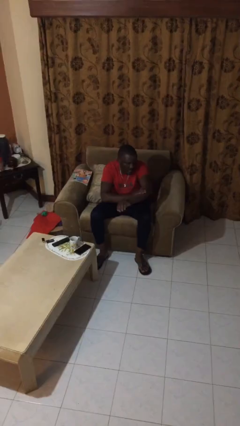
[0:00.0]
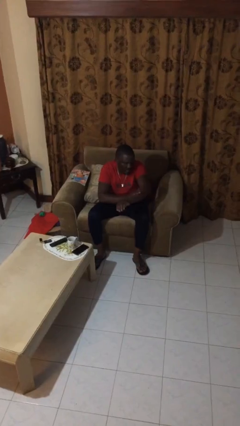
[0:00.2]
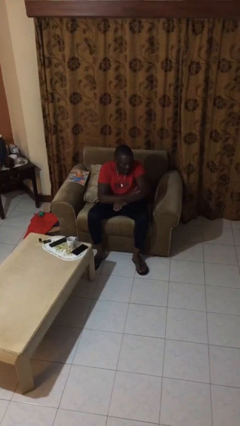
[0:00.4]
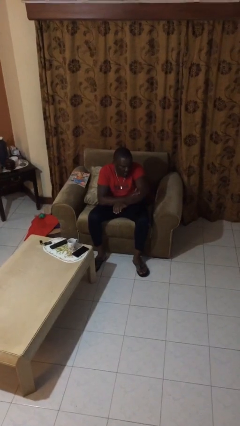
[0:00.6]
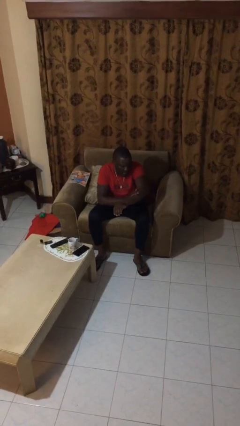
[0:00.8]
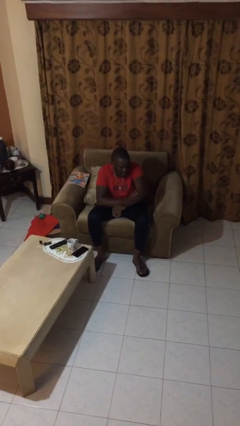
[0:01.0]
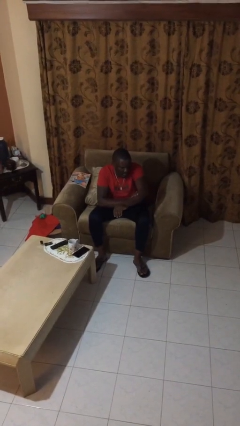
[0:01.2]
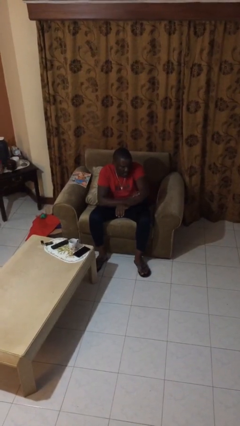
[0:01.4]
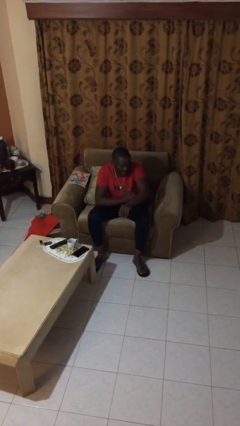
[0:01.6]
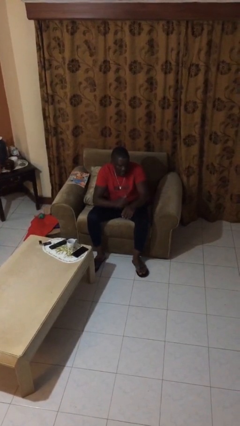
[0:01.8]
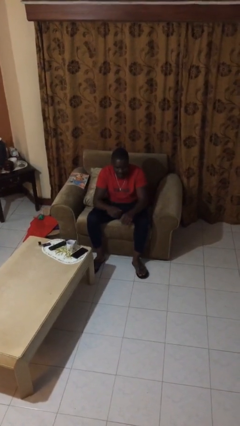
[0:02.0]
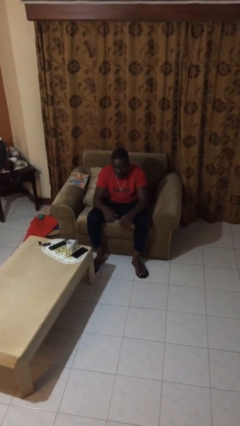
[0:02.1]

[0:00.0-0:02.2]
person swats bug

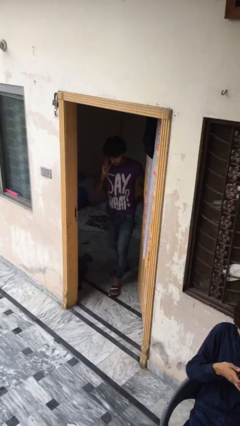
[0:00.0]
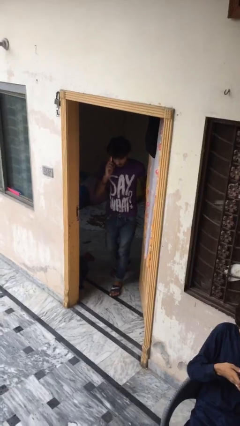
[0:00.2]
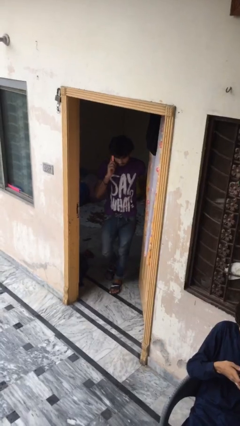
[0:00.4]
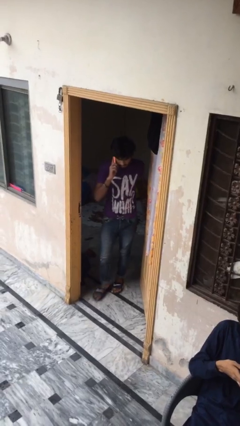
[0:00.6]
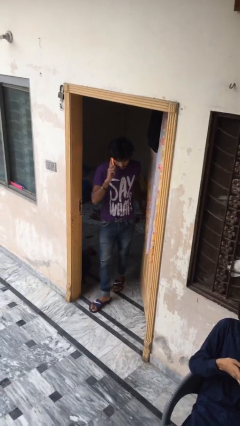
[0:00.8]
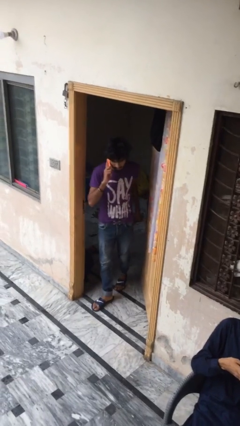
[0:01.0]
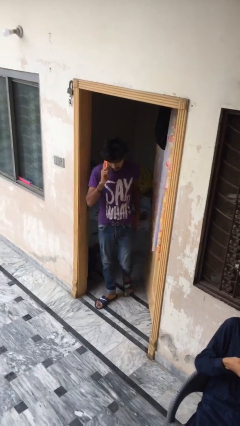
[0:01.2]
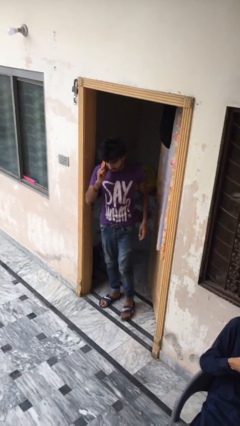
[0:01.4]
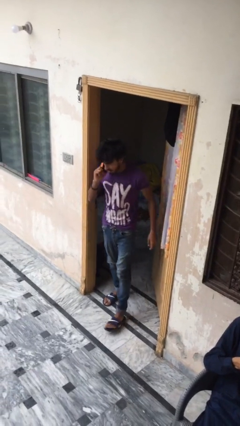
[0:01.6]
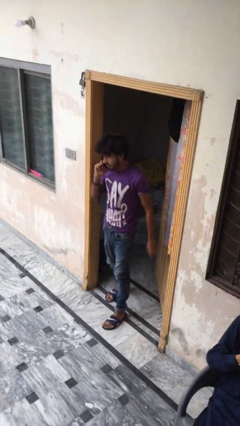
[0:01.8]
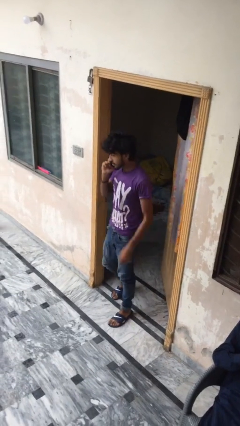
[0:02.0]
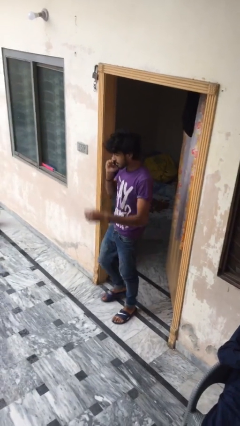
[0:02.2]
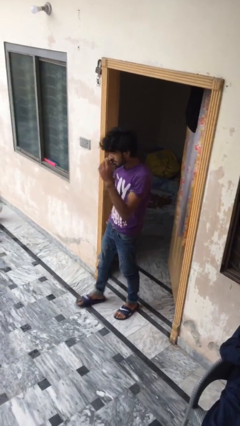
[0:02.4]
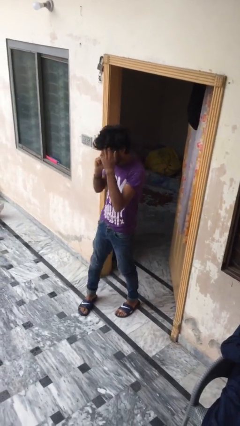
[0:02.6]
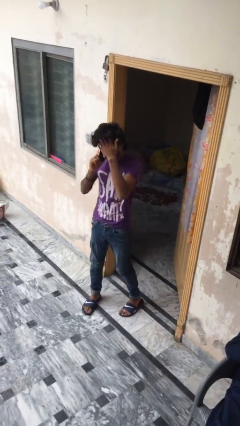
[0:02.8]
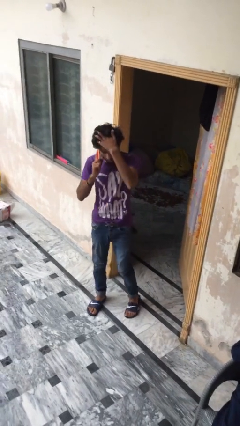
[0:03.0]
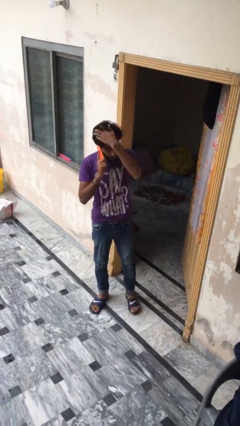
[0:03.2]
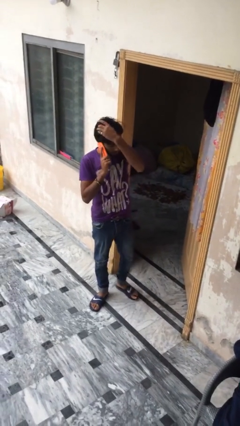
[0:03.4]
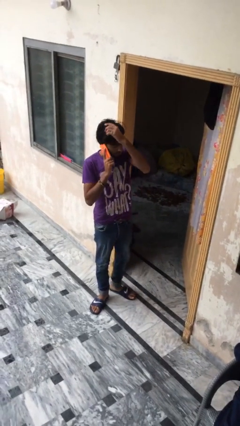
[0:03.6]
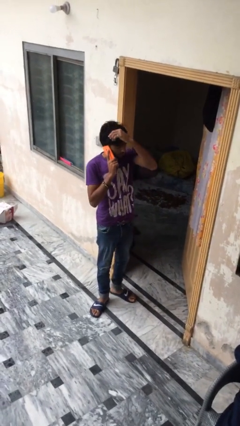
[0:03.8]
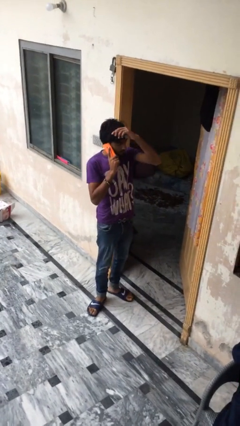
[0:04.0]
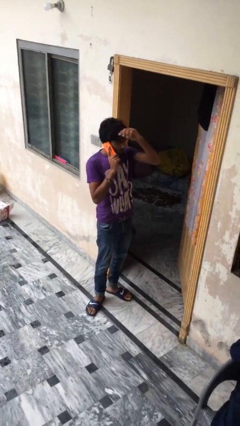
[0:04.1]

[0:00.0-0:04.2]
person enters scene through structure

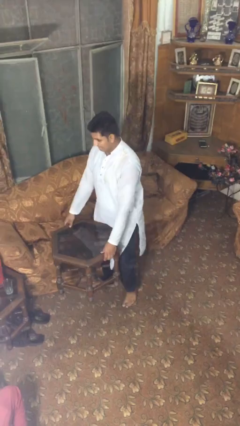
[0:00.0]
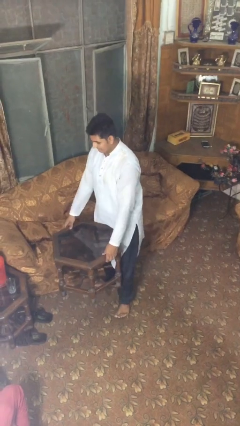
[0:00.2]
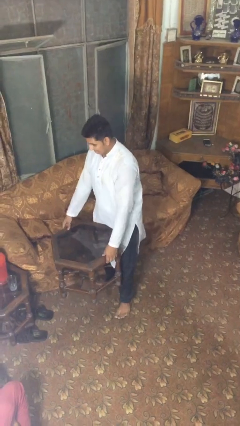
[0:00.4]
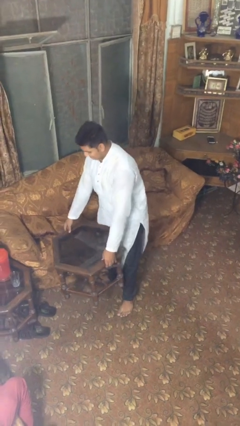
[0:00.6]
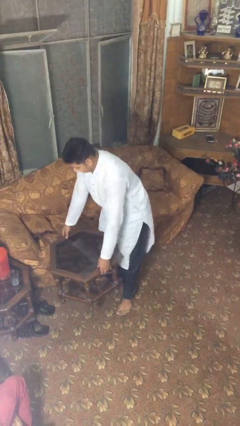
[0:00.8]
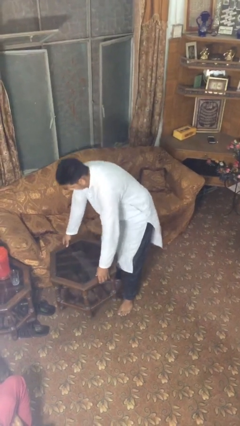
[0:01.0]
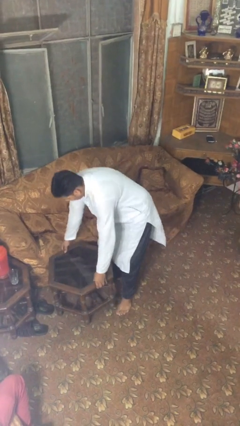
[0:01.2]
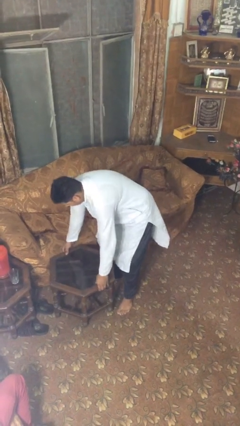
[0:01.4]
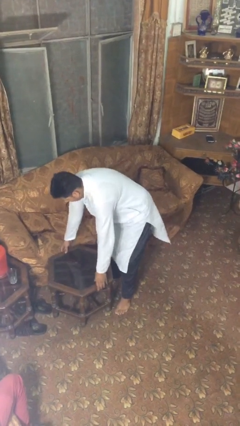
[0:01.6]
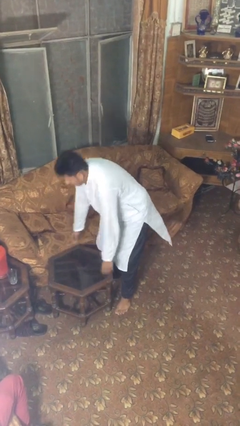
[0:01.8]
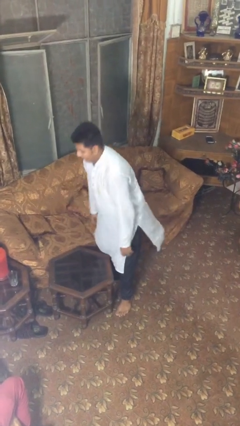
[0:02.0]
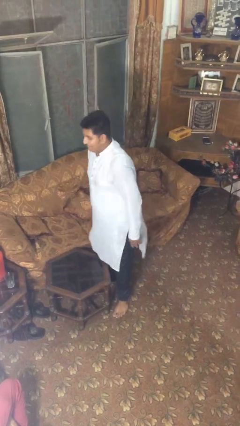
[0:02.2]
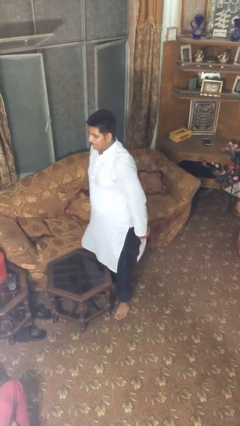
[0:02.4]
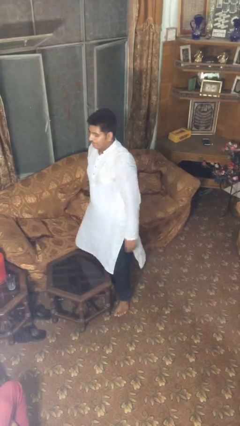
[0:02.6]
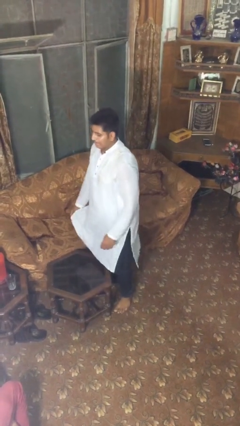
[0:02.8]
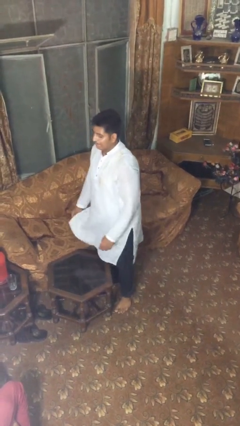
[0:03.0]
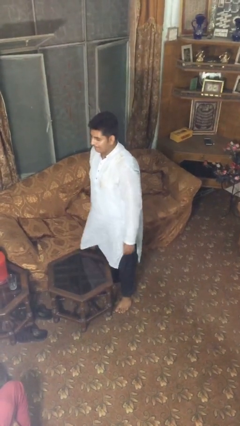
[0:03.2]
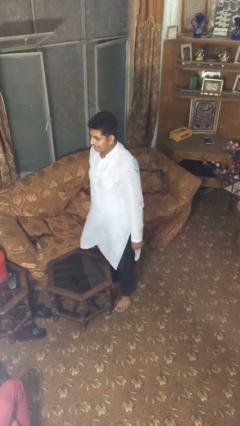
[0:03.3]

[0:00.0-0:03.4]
person puts down object on floor

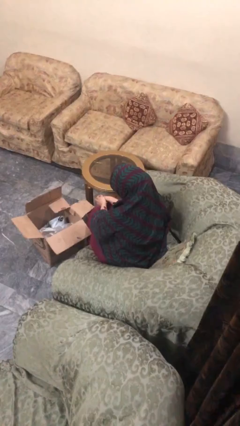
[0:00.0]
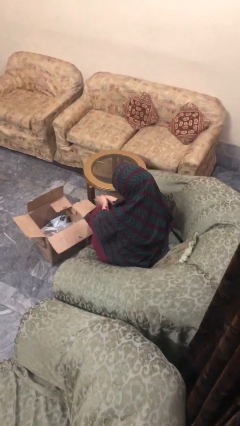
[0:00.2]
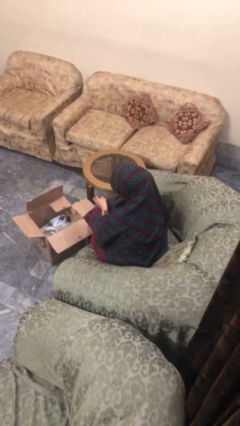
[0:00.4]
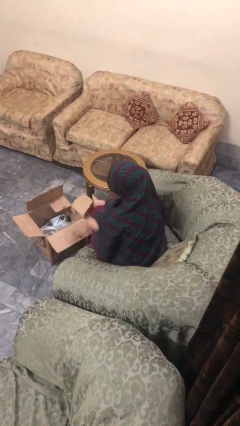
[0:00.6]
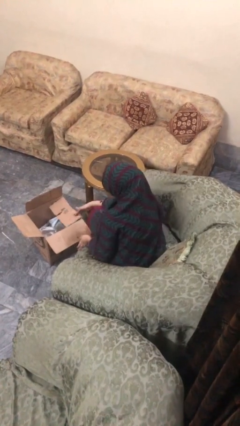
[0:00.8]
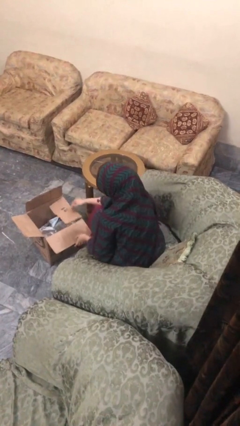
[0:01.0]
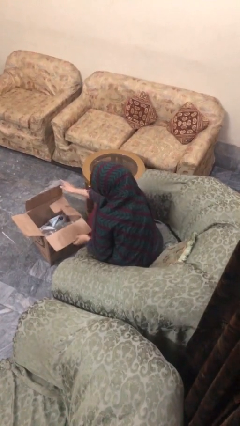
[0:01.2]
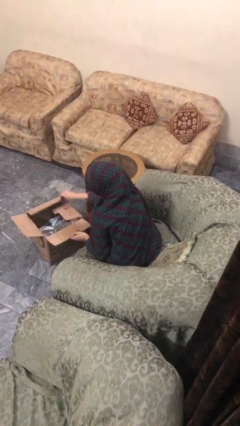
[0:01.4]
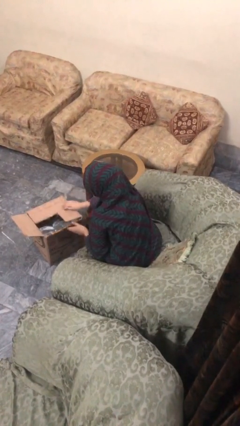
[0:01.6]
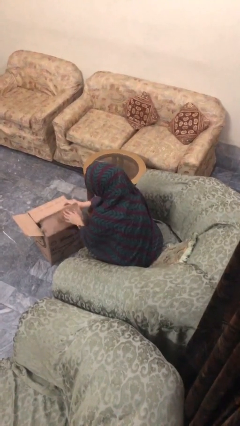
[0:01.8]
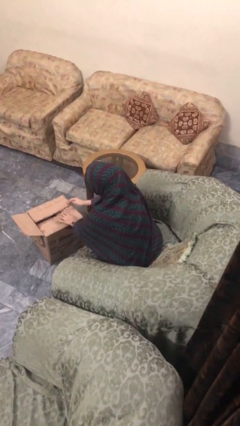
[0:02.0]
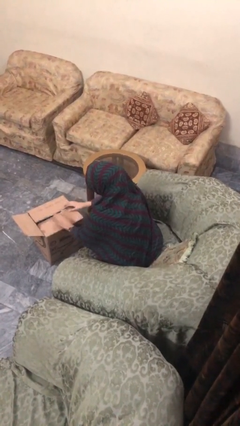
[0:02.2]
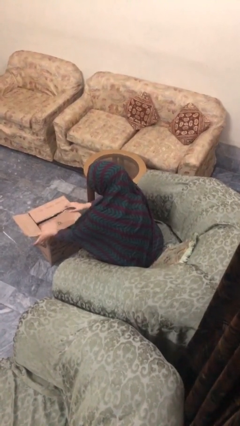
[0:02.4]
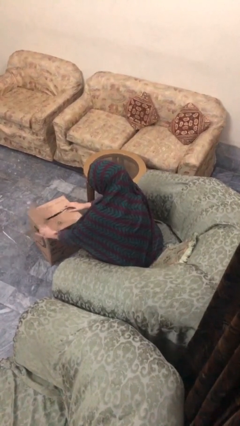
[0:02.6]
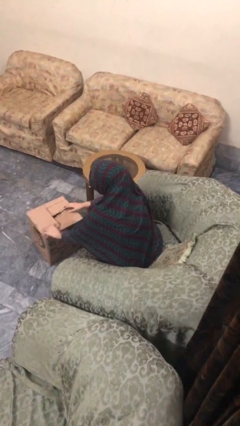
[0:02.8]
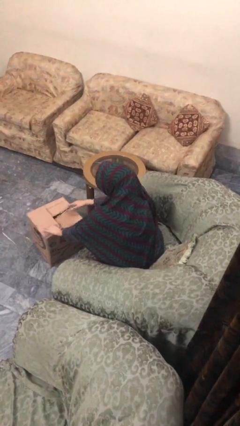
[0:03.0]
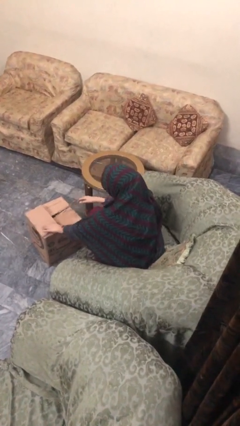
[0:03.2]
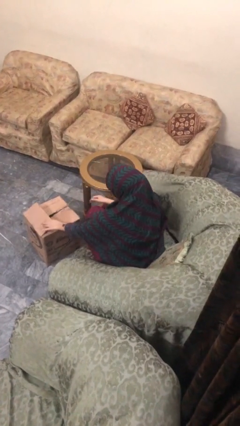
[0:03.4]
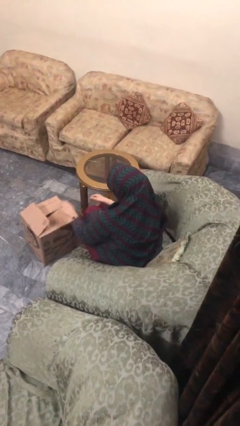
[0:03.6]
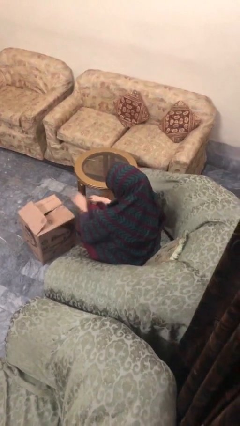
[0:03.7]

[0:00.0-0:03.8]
person closes box

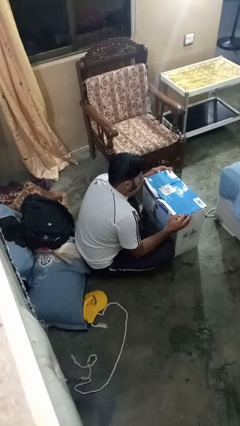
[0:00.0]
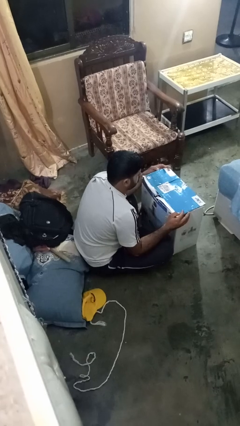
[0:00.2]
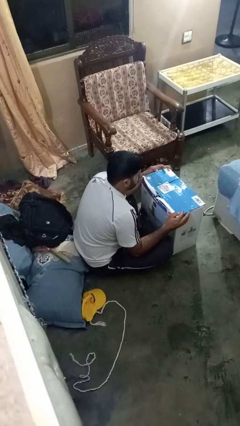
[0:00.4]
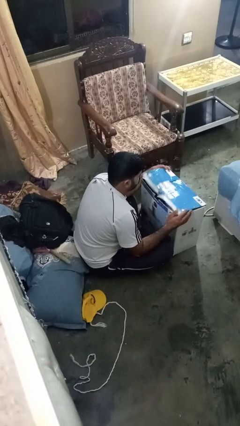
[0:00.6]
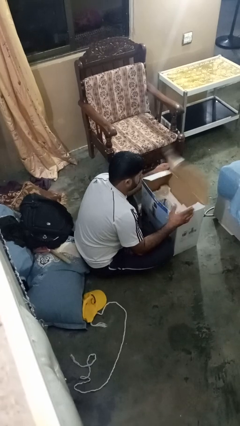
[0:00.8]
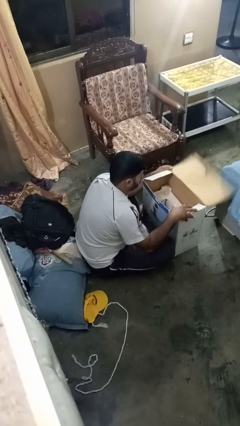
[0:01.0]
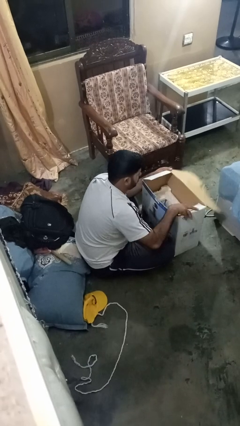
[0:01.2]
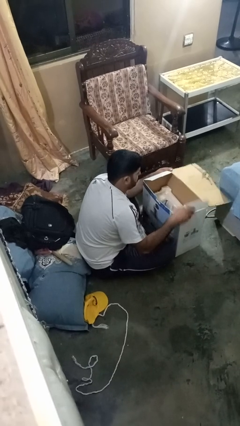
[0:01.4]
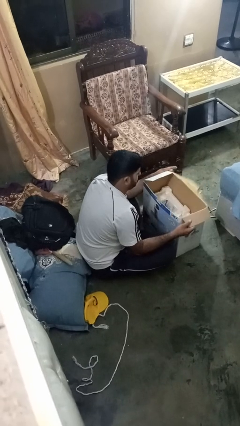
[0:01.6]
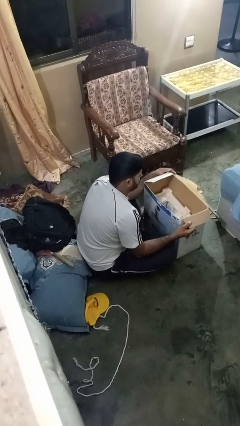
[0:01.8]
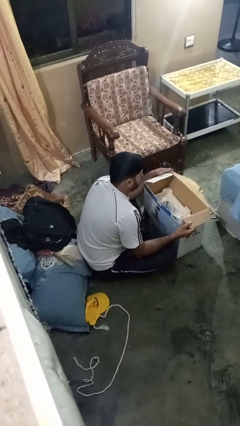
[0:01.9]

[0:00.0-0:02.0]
person opens box

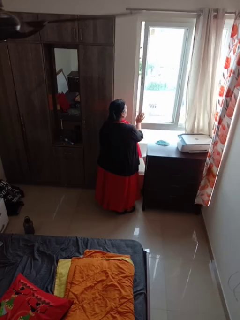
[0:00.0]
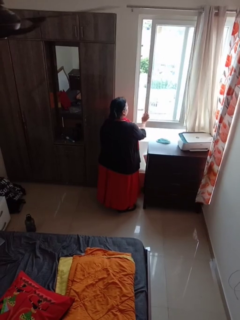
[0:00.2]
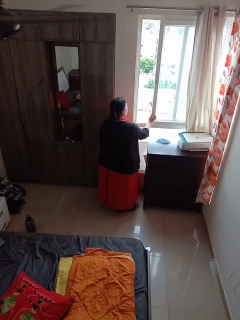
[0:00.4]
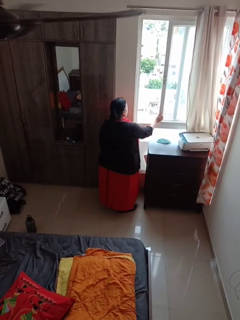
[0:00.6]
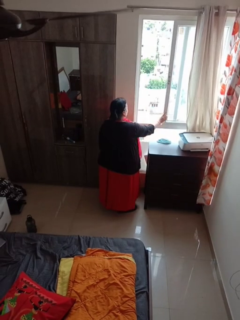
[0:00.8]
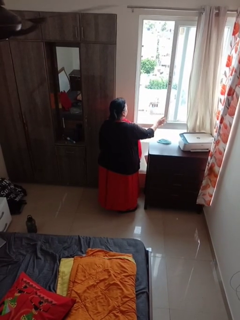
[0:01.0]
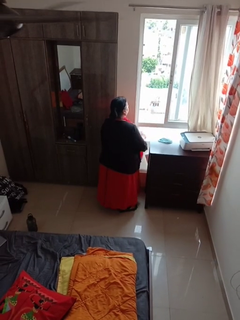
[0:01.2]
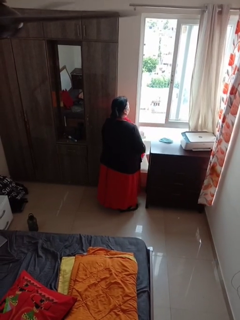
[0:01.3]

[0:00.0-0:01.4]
person opens home window

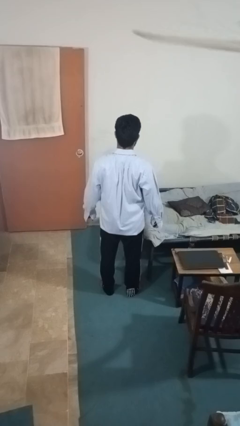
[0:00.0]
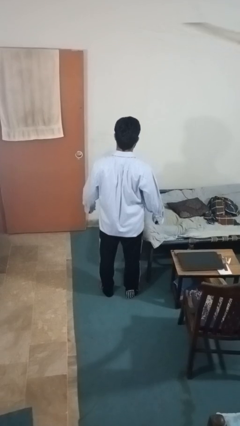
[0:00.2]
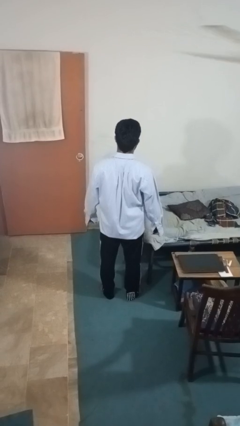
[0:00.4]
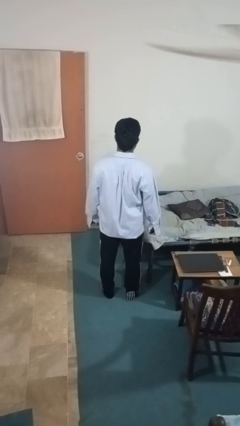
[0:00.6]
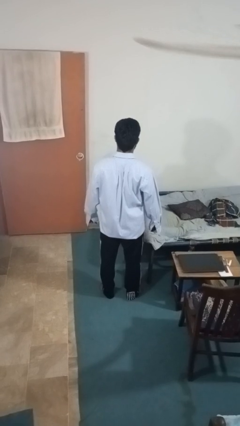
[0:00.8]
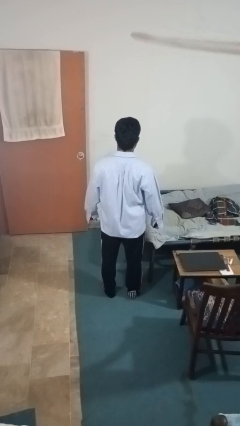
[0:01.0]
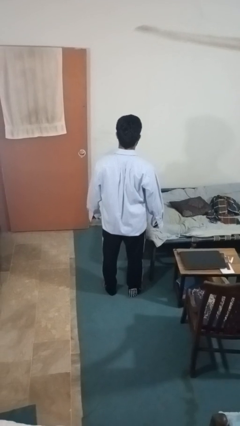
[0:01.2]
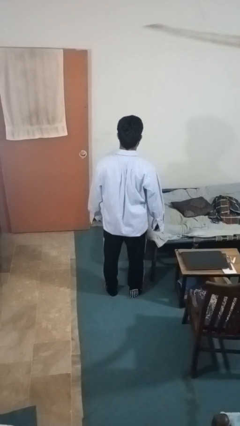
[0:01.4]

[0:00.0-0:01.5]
person buttons shirt
